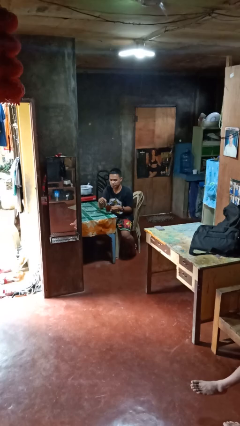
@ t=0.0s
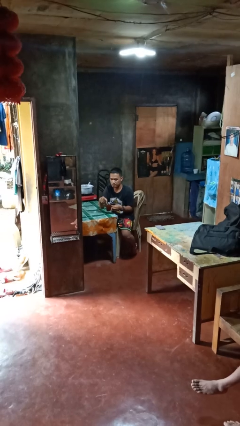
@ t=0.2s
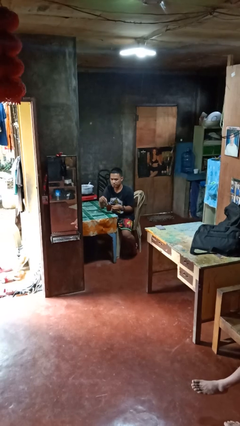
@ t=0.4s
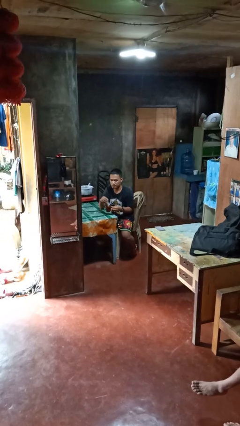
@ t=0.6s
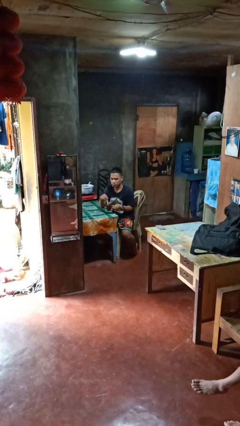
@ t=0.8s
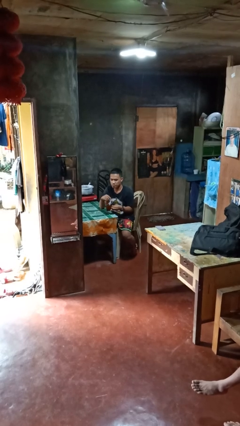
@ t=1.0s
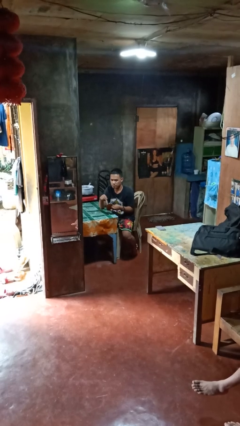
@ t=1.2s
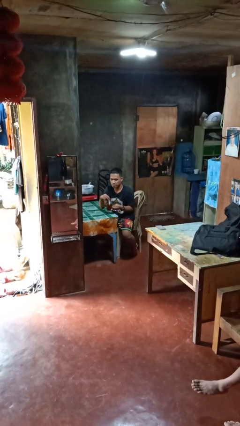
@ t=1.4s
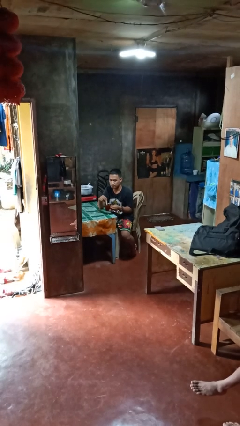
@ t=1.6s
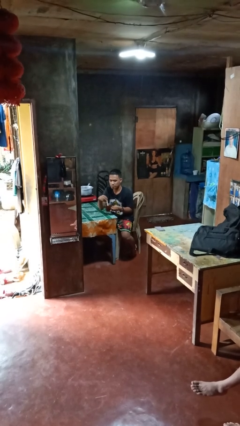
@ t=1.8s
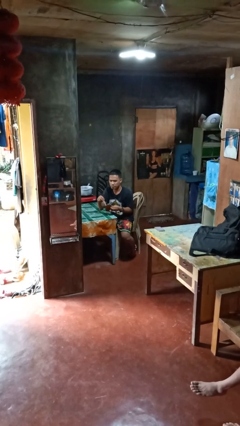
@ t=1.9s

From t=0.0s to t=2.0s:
person stirs mug

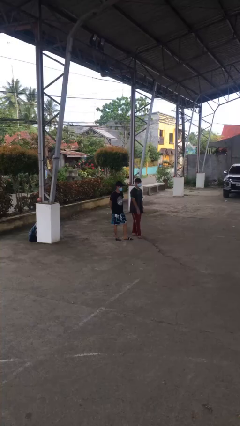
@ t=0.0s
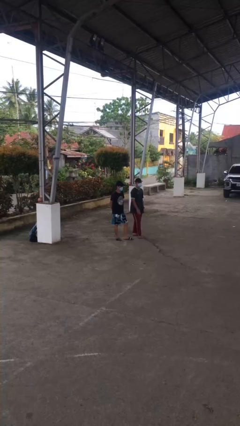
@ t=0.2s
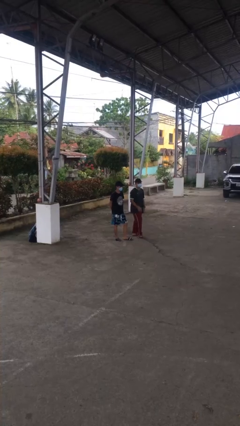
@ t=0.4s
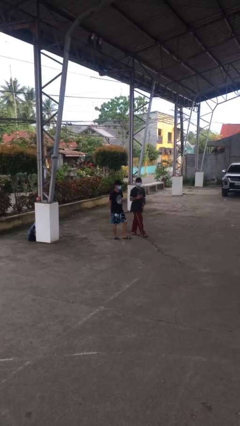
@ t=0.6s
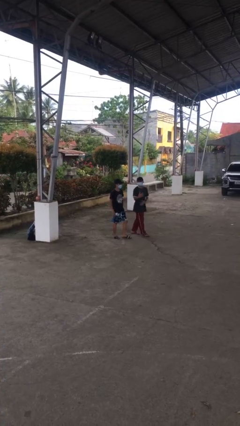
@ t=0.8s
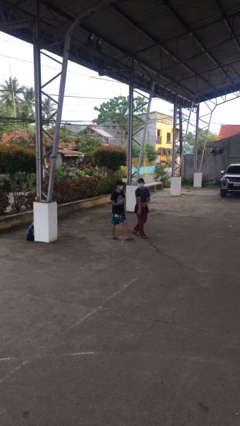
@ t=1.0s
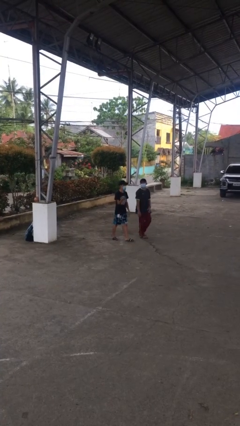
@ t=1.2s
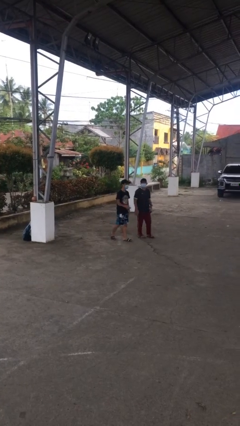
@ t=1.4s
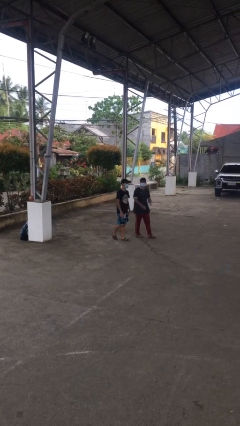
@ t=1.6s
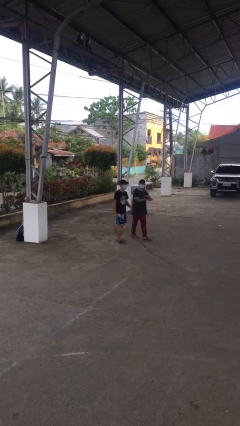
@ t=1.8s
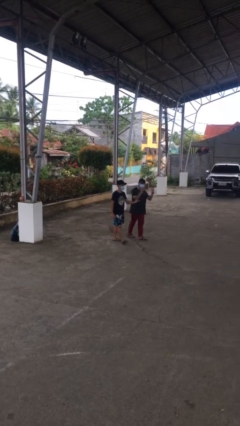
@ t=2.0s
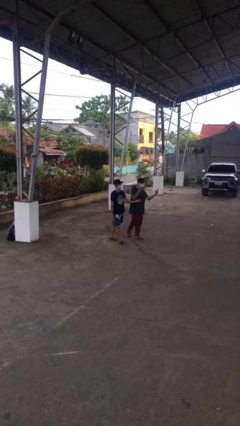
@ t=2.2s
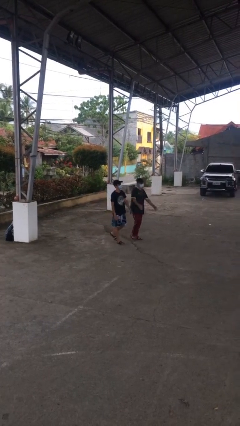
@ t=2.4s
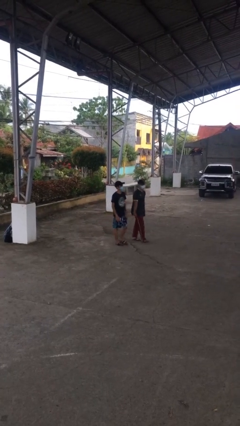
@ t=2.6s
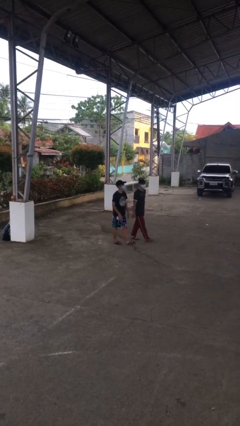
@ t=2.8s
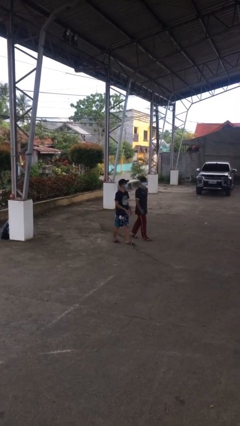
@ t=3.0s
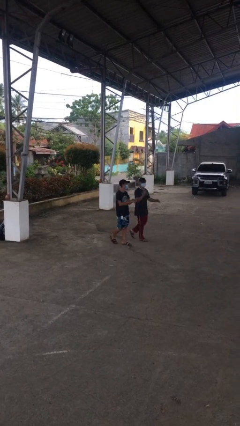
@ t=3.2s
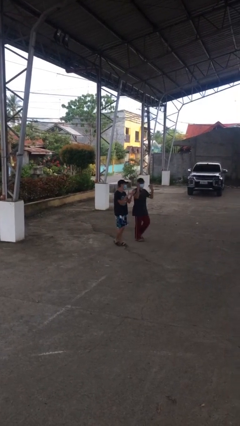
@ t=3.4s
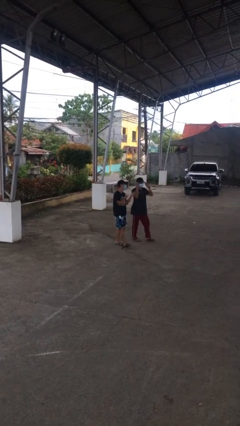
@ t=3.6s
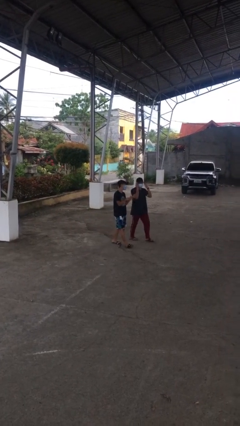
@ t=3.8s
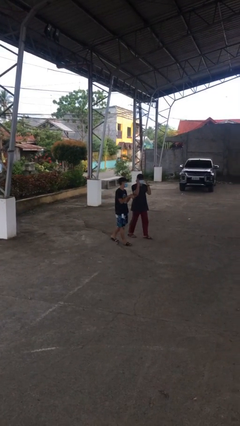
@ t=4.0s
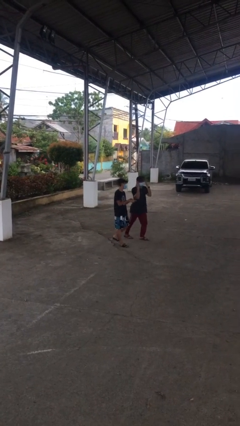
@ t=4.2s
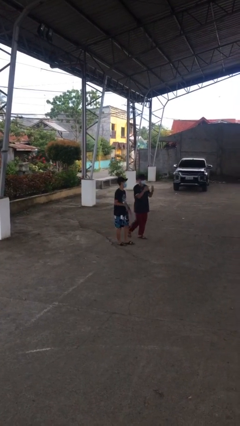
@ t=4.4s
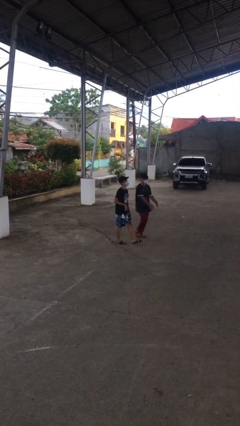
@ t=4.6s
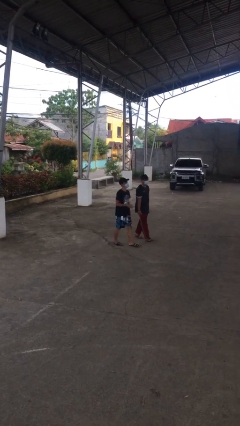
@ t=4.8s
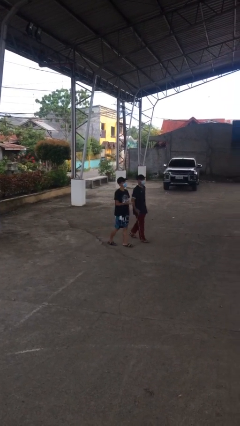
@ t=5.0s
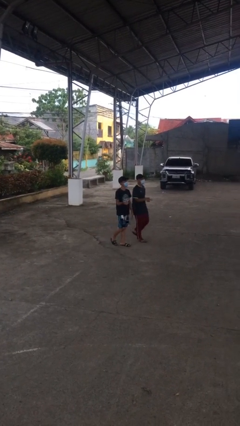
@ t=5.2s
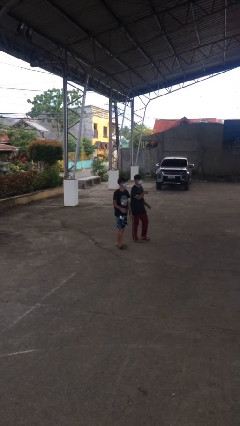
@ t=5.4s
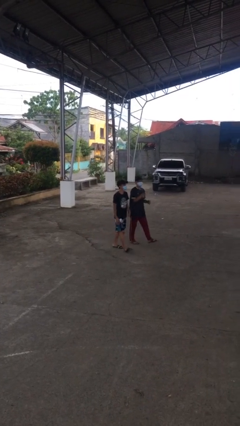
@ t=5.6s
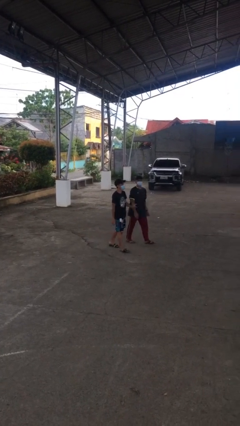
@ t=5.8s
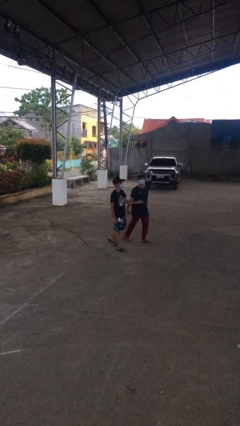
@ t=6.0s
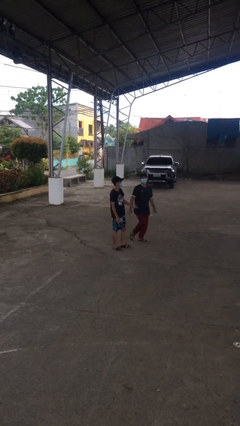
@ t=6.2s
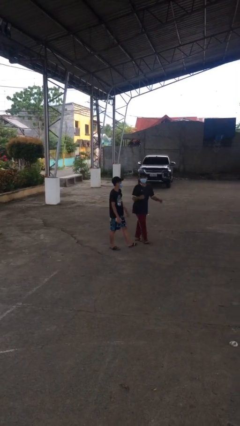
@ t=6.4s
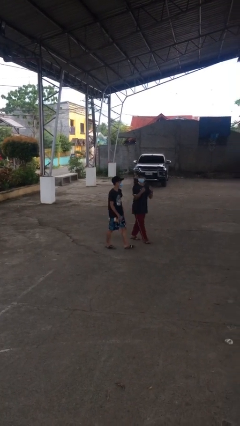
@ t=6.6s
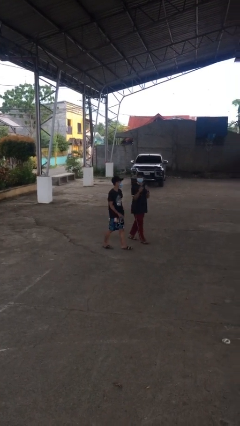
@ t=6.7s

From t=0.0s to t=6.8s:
person talks to person

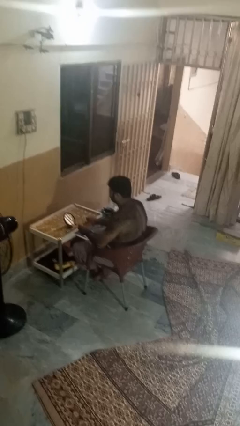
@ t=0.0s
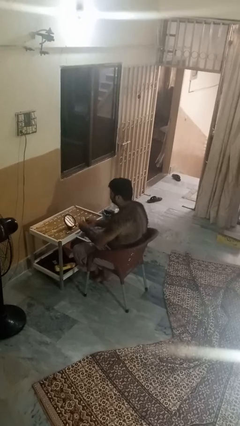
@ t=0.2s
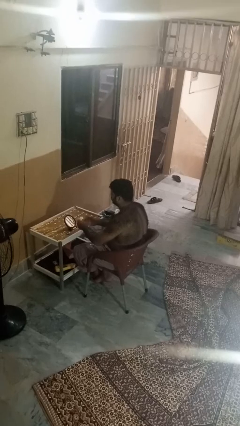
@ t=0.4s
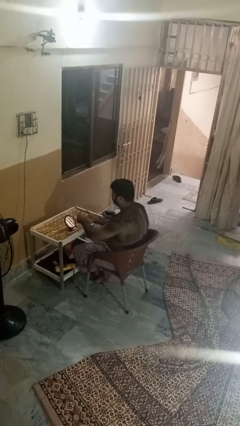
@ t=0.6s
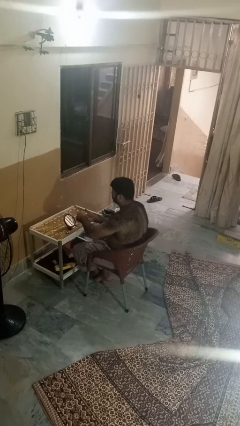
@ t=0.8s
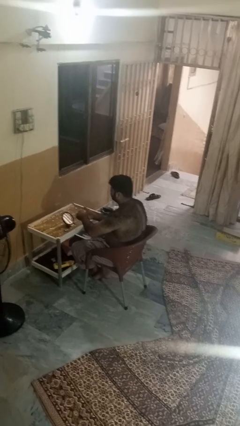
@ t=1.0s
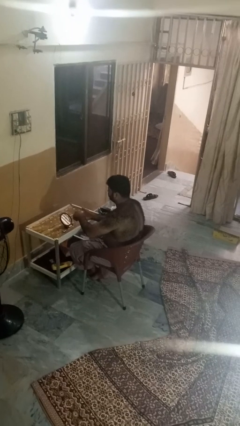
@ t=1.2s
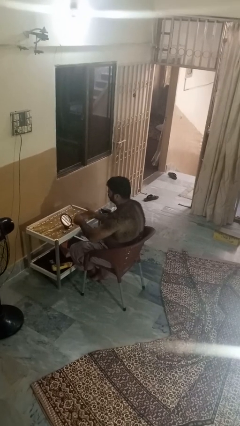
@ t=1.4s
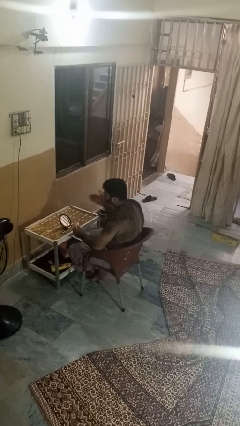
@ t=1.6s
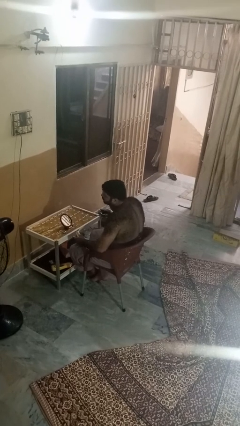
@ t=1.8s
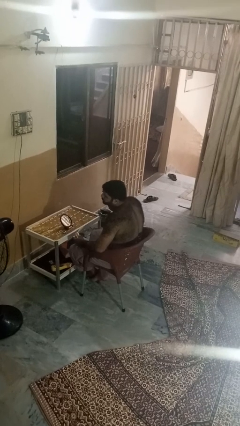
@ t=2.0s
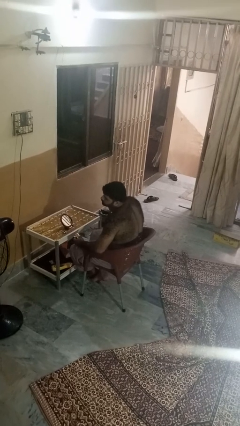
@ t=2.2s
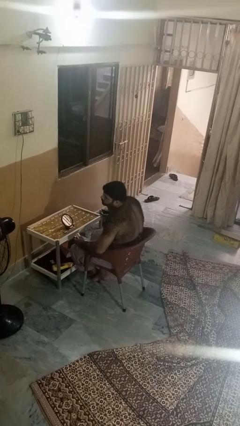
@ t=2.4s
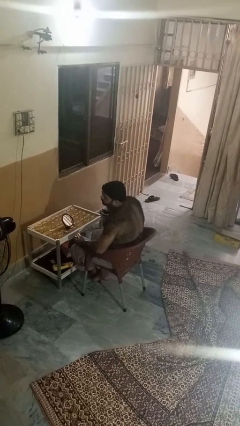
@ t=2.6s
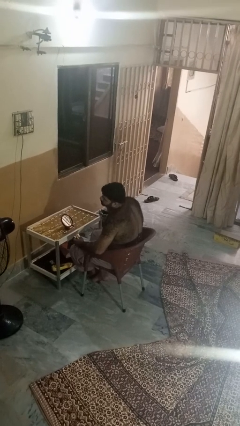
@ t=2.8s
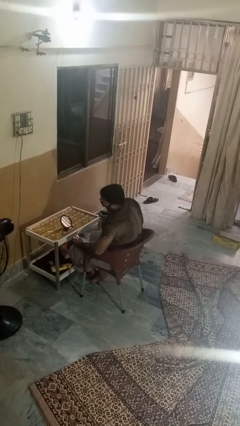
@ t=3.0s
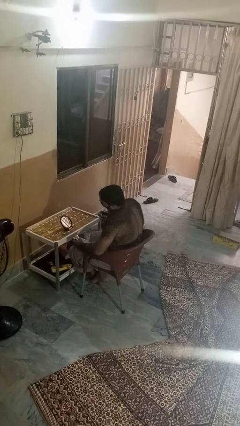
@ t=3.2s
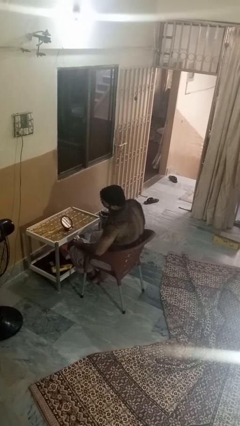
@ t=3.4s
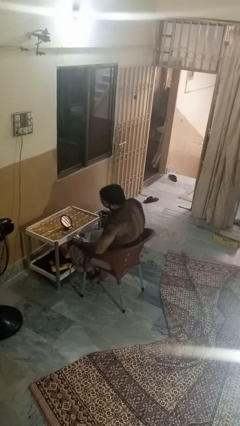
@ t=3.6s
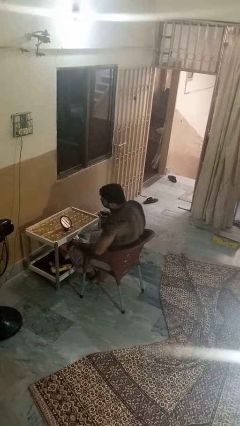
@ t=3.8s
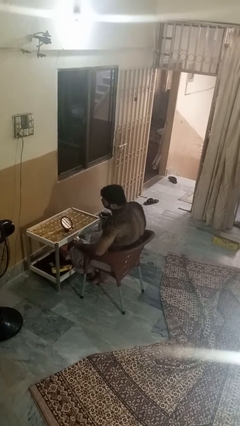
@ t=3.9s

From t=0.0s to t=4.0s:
person applies foundation makeup

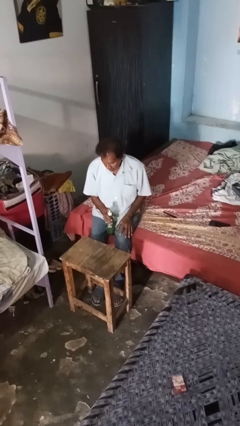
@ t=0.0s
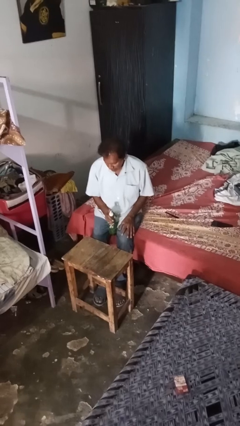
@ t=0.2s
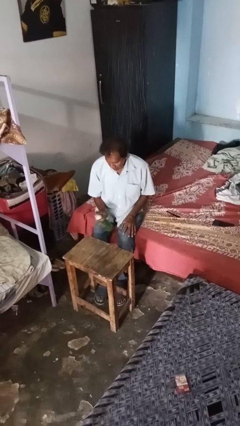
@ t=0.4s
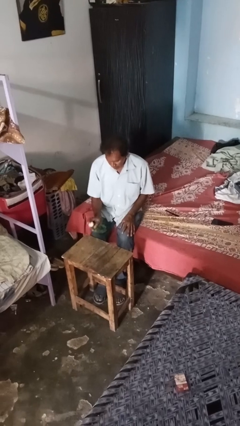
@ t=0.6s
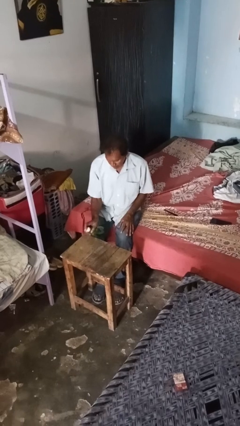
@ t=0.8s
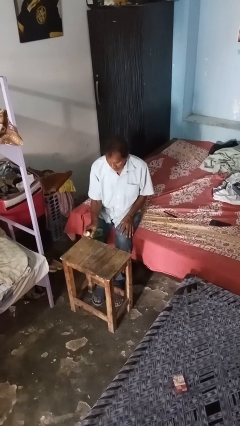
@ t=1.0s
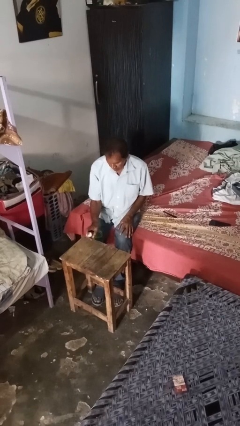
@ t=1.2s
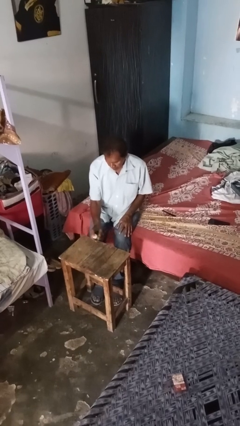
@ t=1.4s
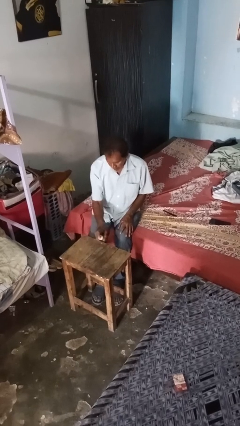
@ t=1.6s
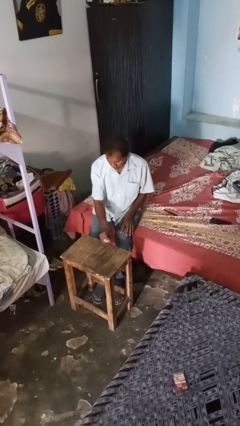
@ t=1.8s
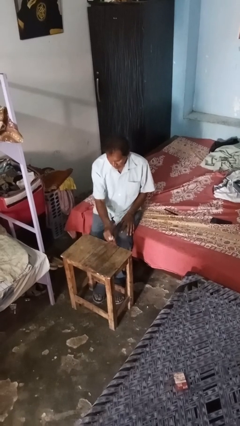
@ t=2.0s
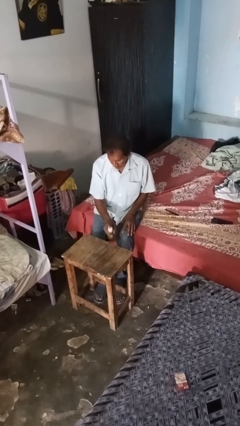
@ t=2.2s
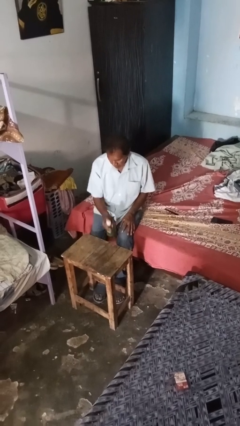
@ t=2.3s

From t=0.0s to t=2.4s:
person sprays from bottle

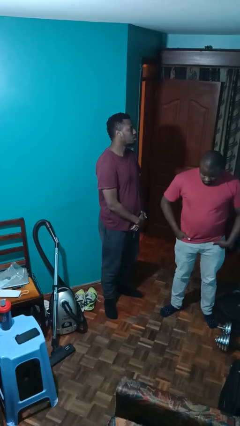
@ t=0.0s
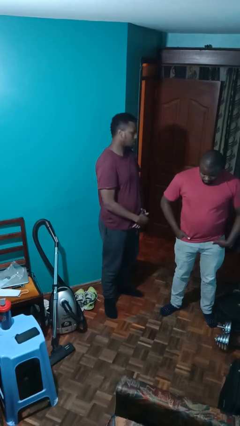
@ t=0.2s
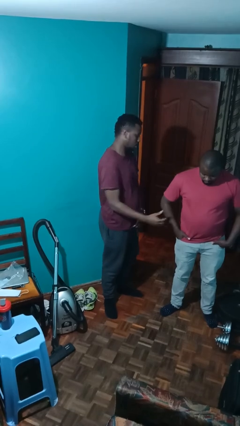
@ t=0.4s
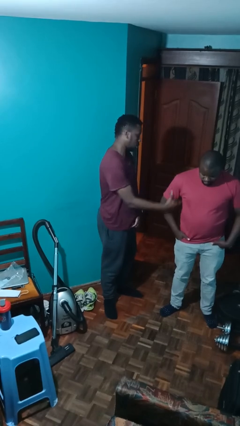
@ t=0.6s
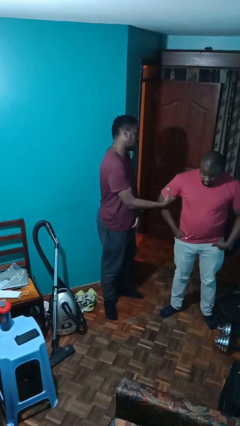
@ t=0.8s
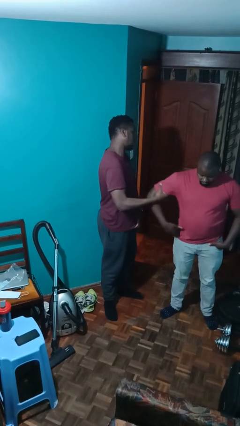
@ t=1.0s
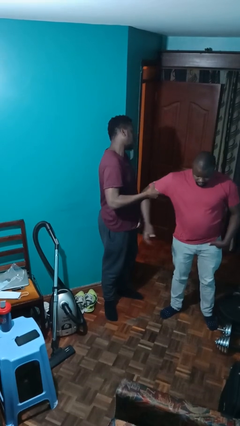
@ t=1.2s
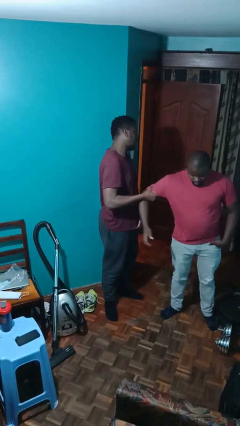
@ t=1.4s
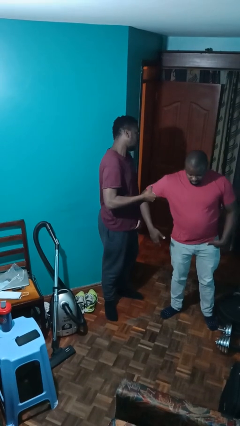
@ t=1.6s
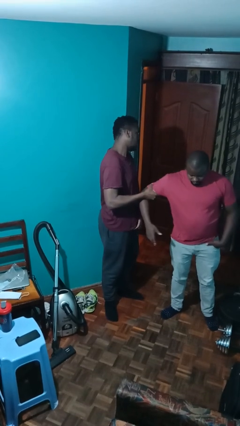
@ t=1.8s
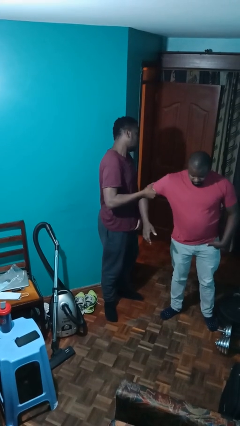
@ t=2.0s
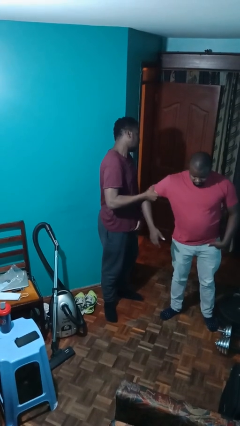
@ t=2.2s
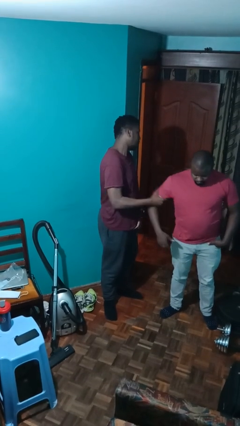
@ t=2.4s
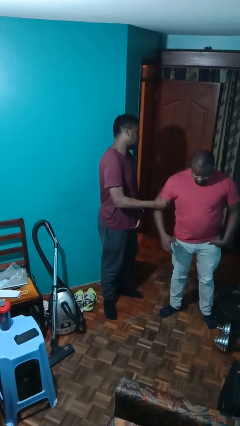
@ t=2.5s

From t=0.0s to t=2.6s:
person grabs person by bicep
